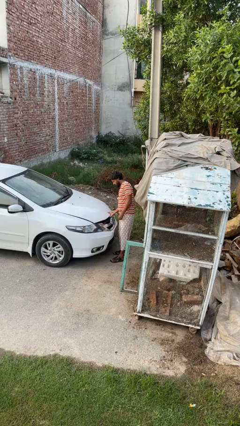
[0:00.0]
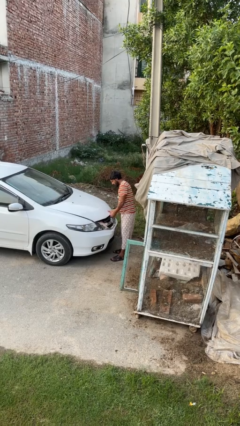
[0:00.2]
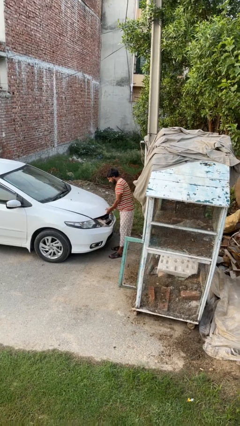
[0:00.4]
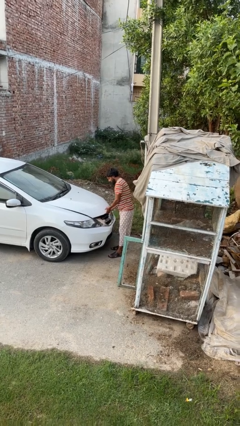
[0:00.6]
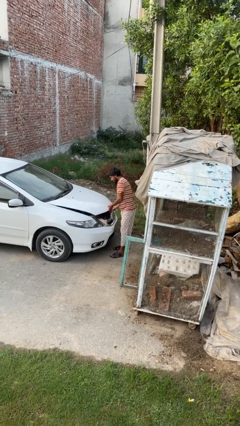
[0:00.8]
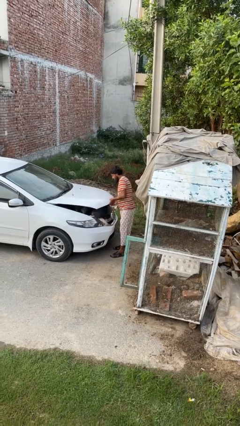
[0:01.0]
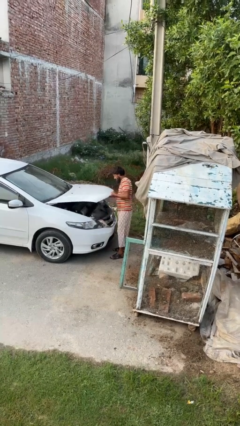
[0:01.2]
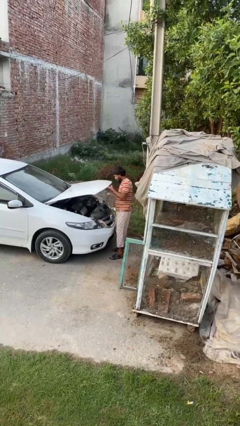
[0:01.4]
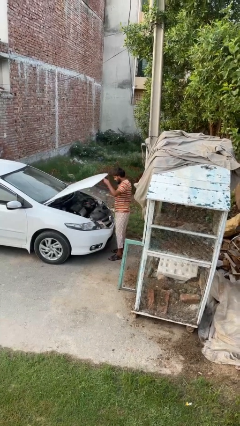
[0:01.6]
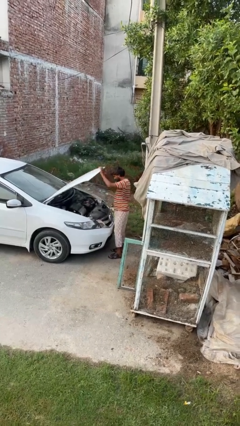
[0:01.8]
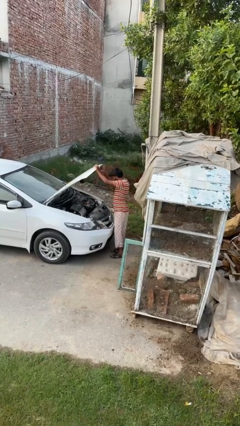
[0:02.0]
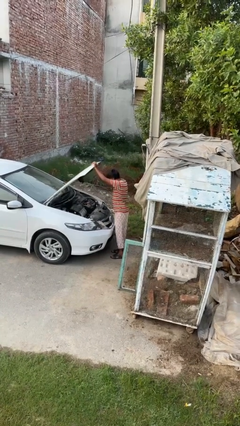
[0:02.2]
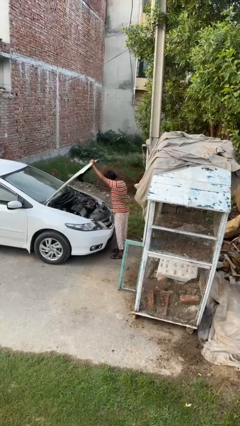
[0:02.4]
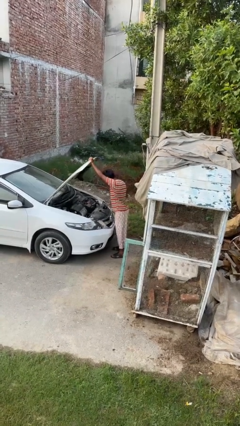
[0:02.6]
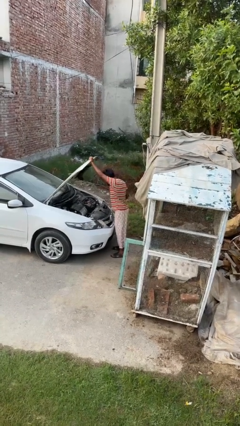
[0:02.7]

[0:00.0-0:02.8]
person opens car hood

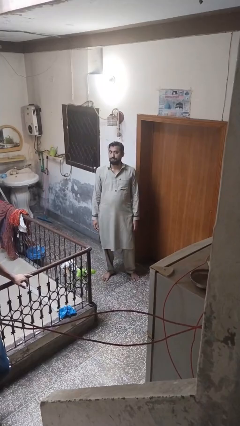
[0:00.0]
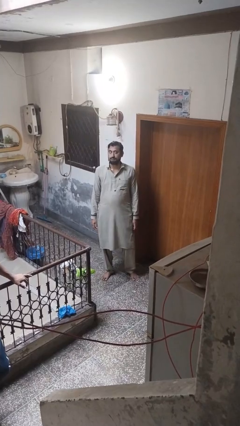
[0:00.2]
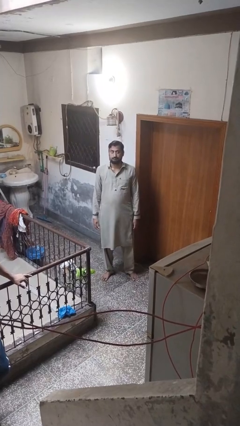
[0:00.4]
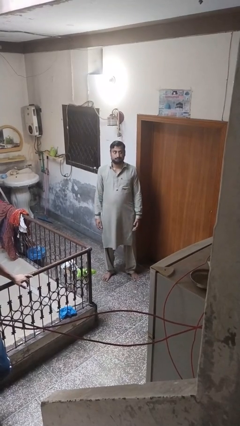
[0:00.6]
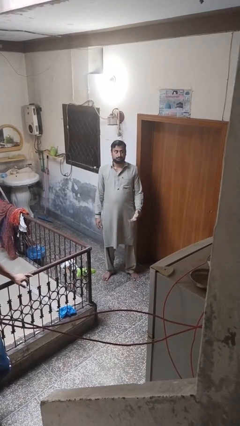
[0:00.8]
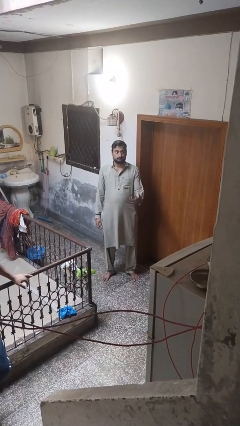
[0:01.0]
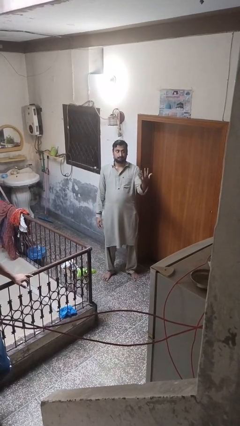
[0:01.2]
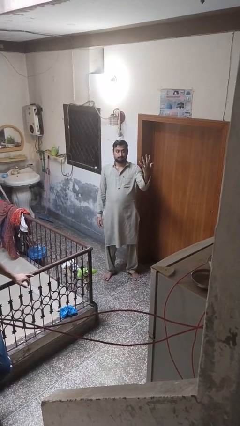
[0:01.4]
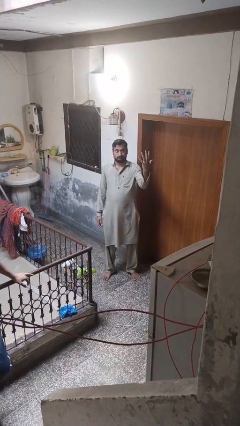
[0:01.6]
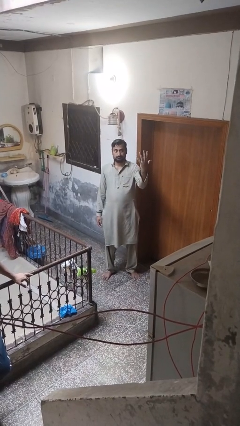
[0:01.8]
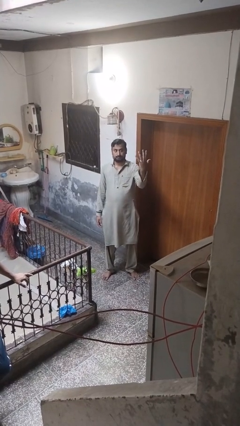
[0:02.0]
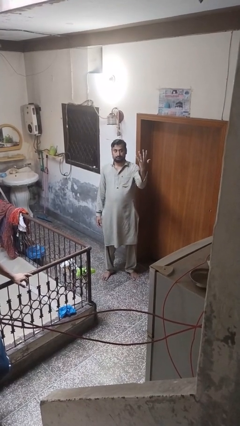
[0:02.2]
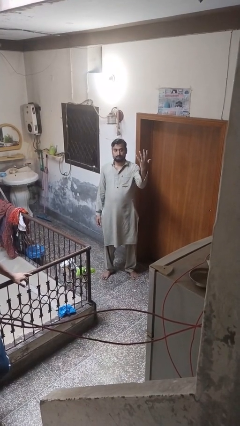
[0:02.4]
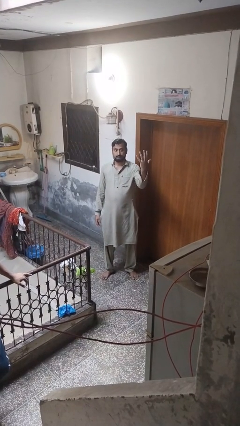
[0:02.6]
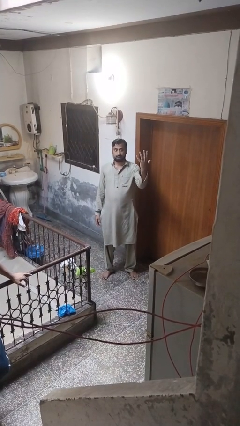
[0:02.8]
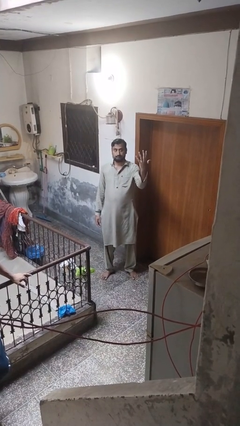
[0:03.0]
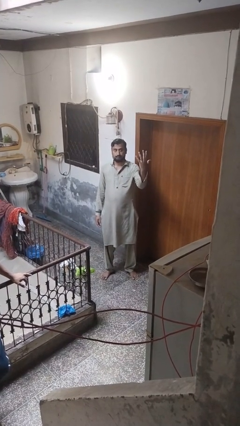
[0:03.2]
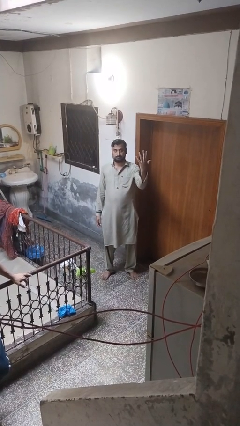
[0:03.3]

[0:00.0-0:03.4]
person gestures number five

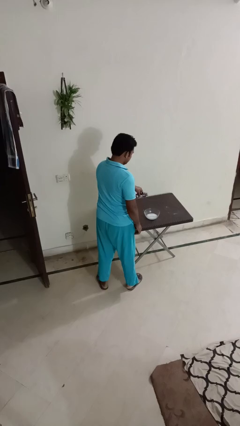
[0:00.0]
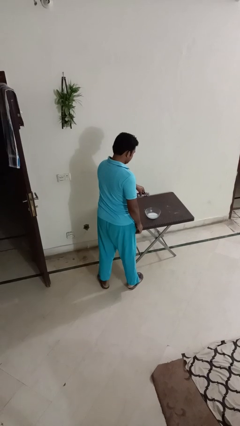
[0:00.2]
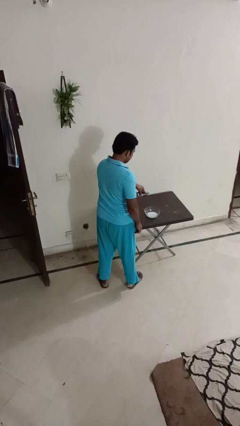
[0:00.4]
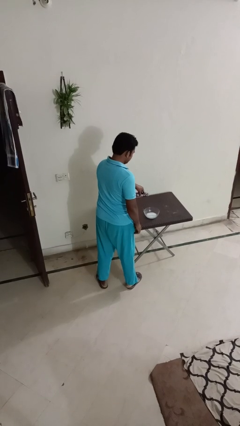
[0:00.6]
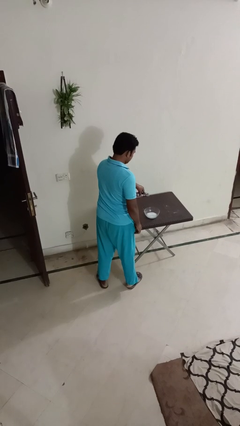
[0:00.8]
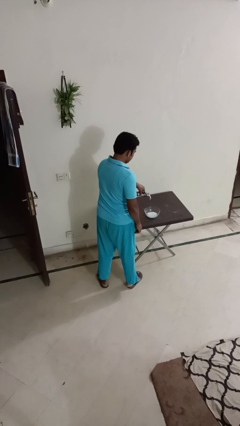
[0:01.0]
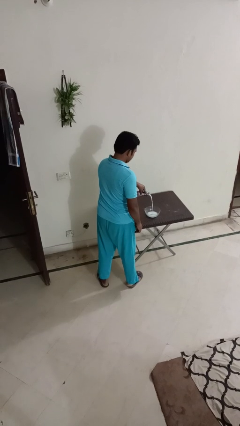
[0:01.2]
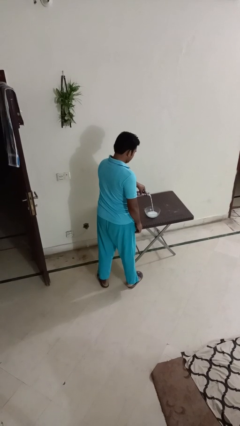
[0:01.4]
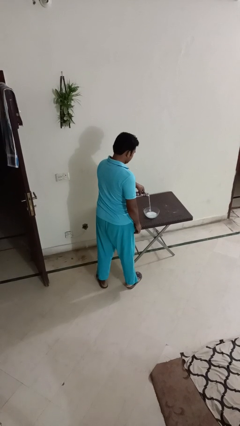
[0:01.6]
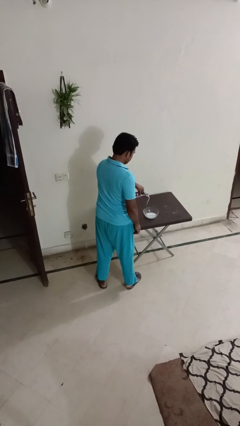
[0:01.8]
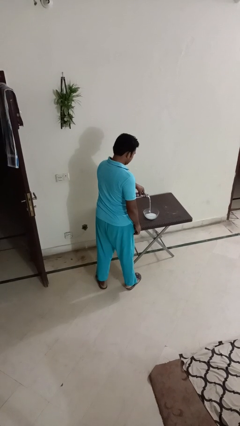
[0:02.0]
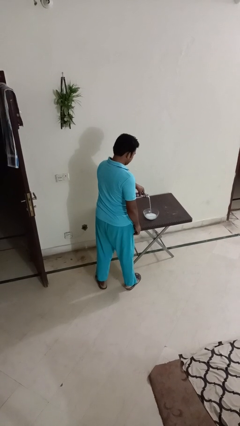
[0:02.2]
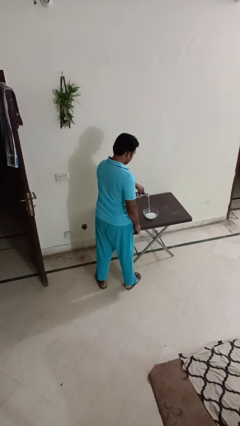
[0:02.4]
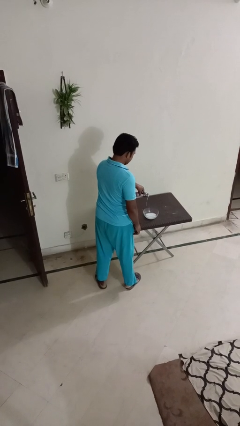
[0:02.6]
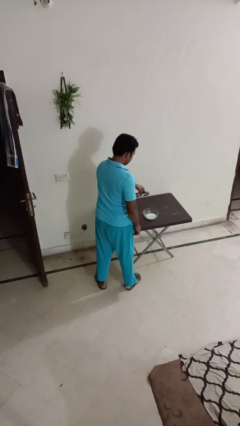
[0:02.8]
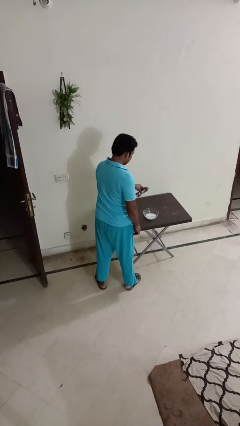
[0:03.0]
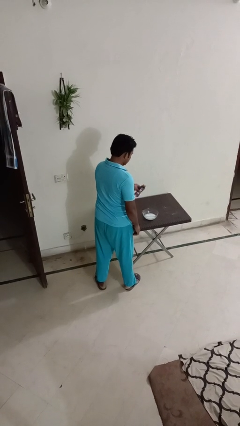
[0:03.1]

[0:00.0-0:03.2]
person pours into bowl

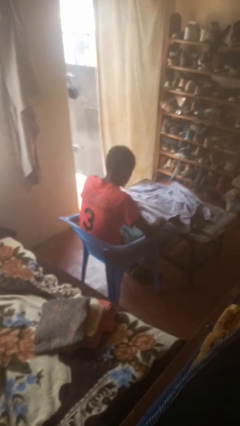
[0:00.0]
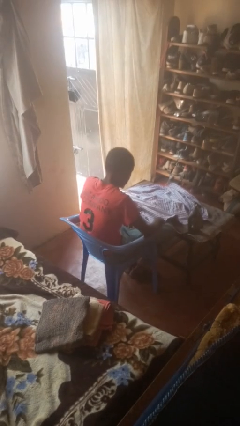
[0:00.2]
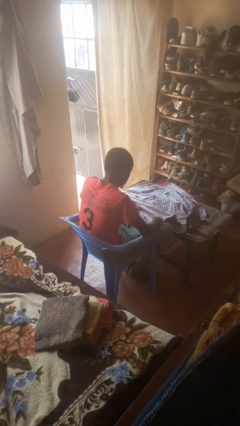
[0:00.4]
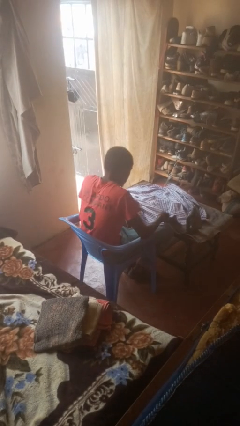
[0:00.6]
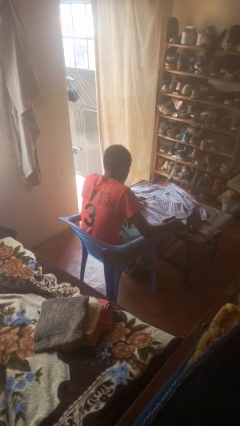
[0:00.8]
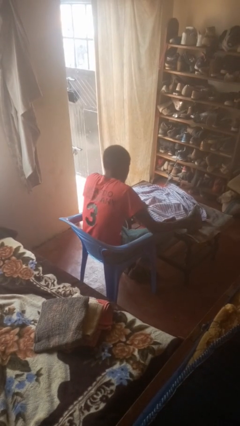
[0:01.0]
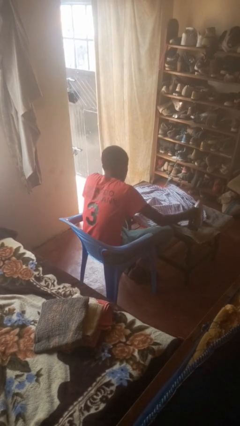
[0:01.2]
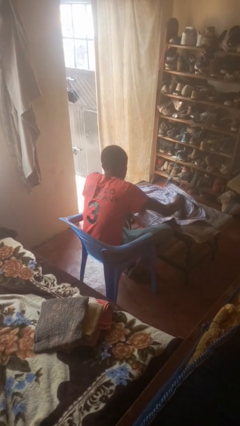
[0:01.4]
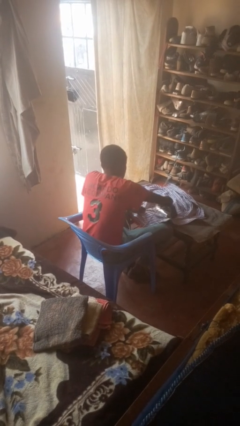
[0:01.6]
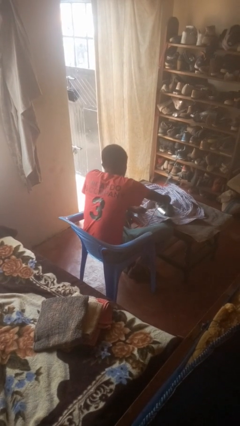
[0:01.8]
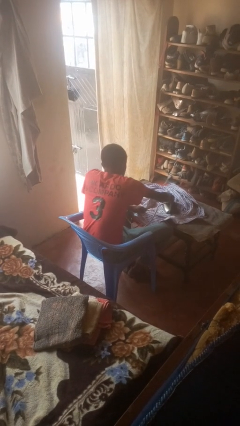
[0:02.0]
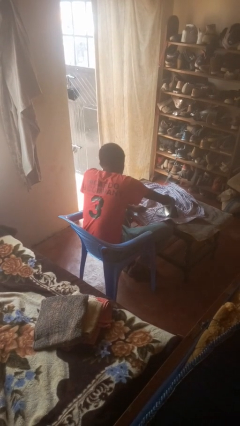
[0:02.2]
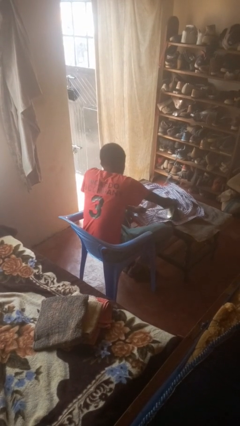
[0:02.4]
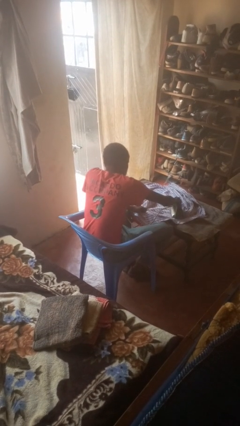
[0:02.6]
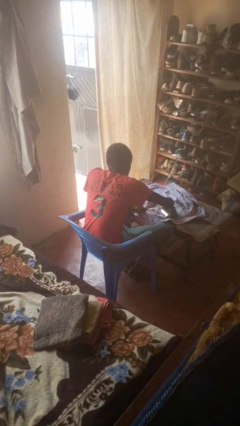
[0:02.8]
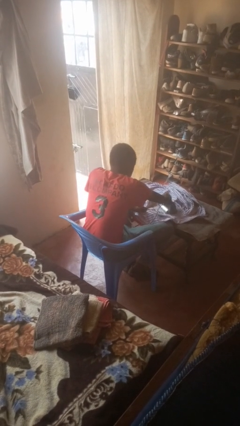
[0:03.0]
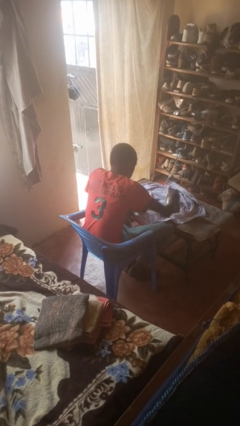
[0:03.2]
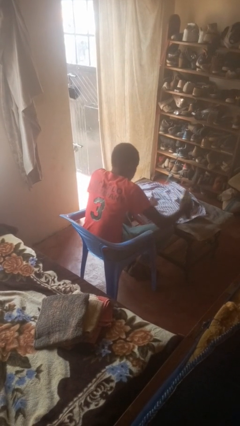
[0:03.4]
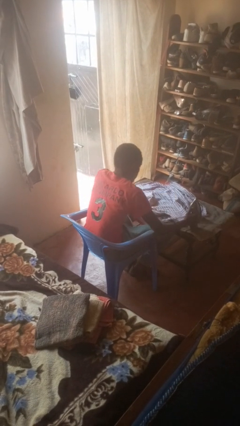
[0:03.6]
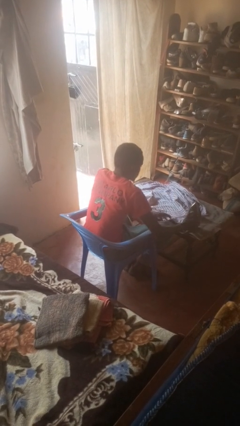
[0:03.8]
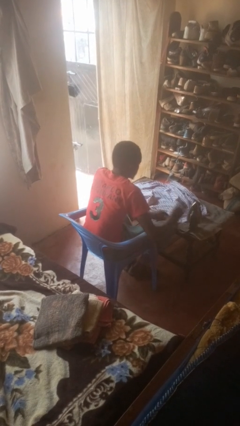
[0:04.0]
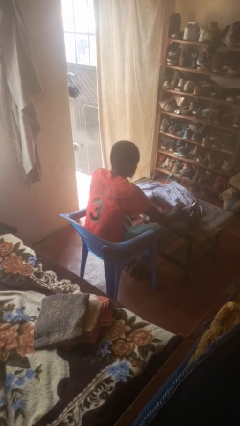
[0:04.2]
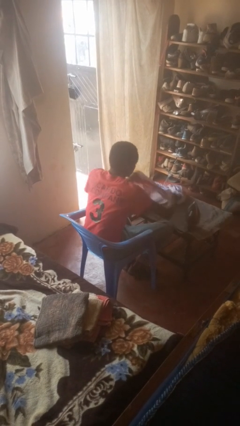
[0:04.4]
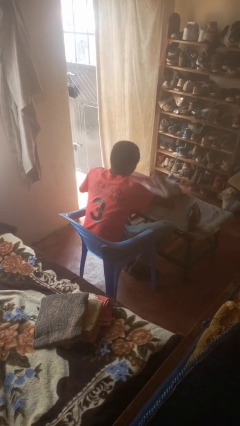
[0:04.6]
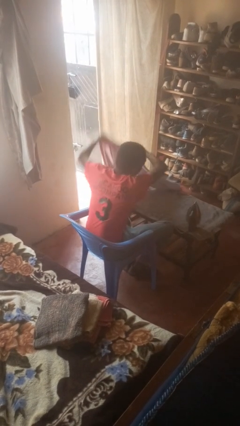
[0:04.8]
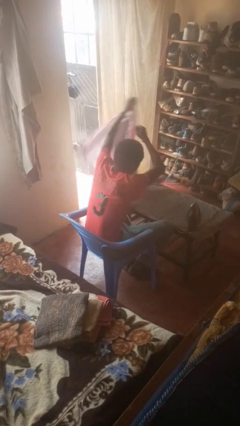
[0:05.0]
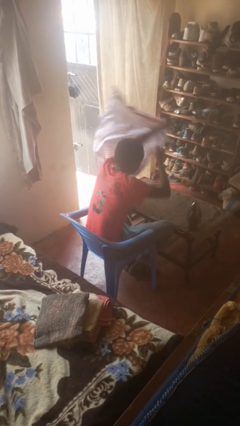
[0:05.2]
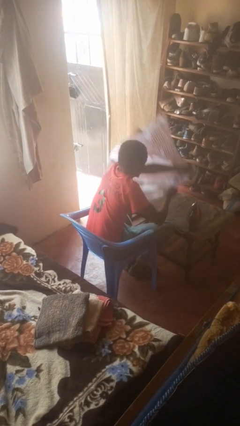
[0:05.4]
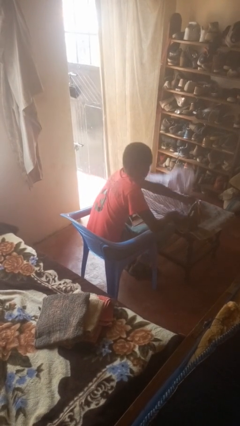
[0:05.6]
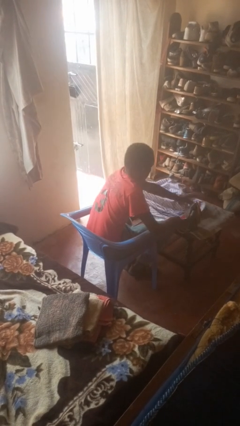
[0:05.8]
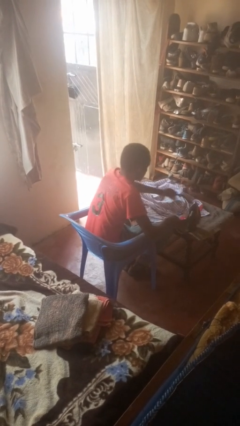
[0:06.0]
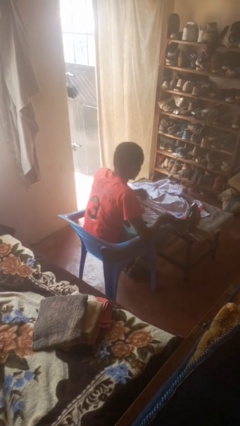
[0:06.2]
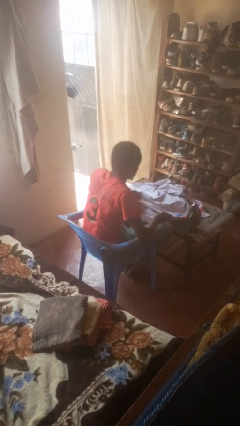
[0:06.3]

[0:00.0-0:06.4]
person irons clothes

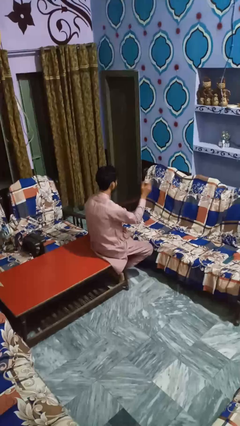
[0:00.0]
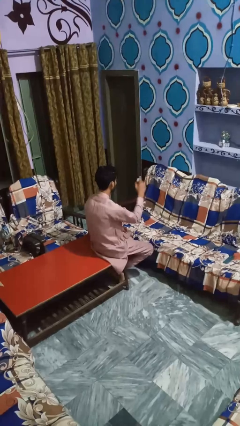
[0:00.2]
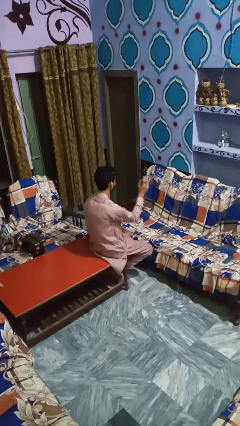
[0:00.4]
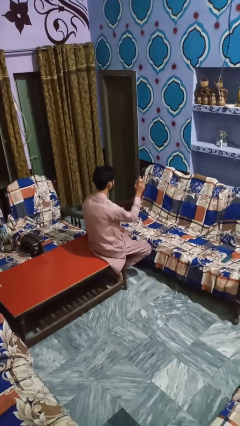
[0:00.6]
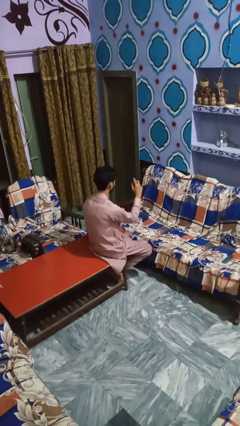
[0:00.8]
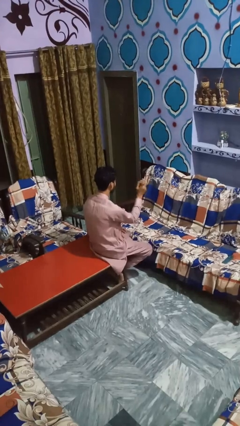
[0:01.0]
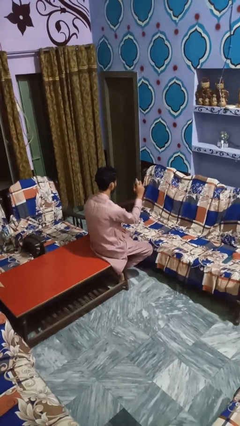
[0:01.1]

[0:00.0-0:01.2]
person sprays from bottle

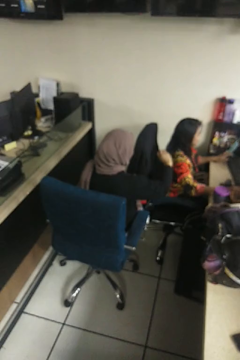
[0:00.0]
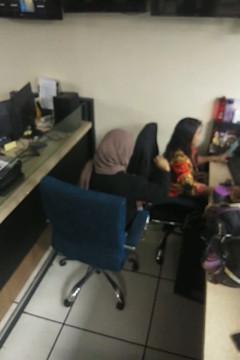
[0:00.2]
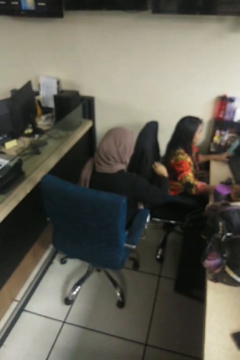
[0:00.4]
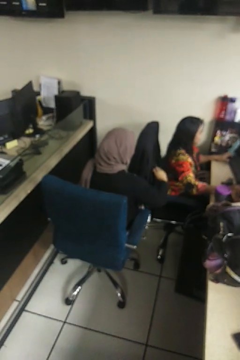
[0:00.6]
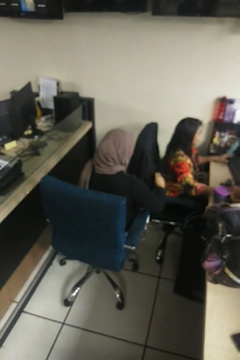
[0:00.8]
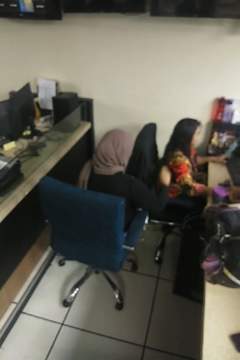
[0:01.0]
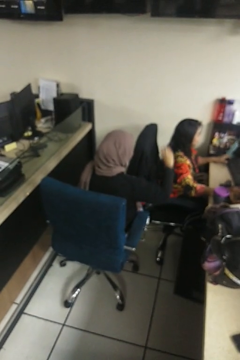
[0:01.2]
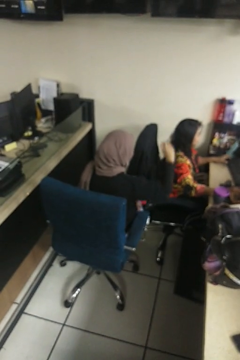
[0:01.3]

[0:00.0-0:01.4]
person brushes hair of person
